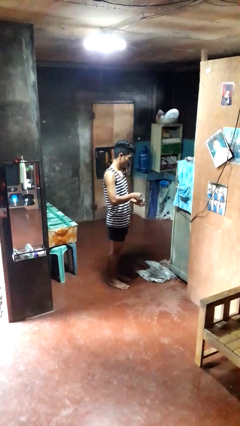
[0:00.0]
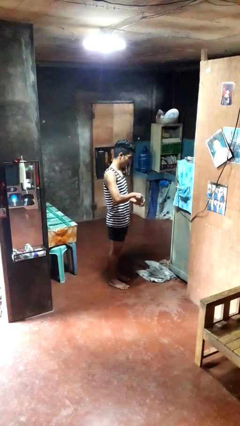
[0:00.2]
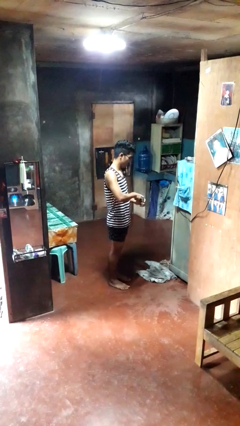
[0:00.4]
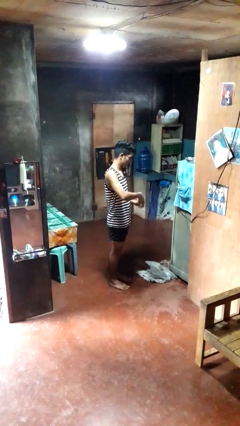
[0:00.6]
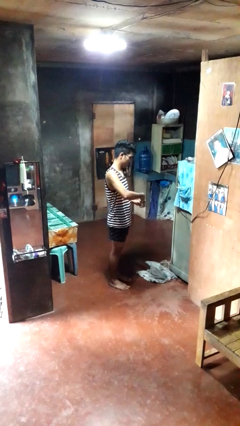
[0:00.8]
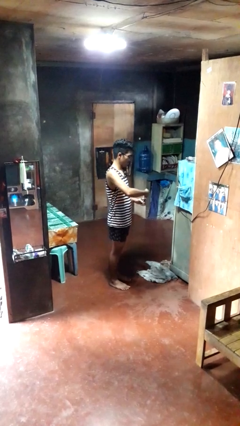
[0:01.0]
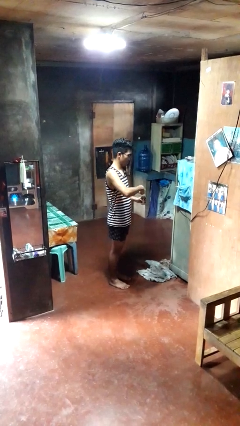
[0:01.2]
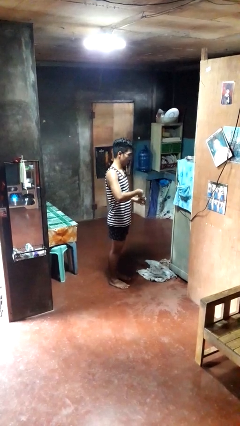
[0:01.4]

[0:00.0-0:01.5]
person opens beverage can

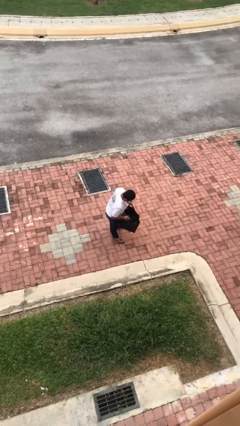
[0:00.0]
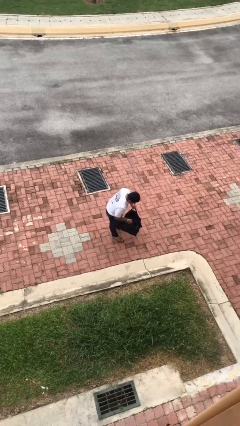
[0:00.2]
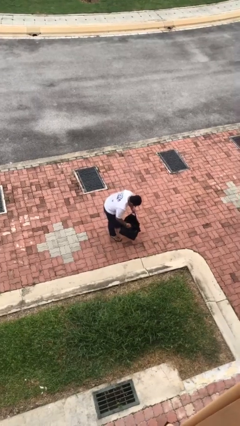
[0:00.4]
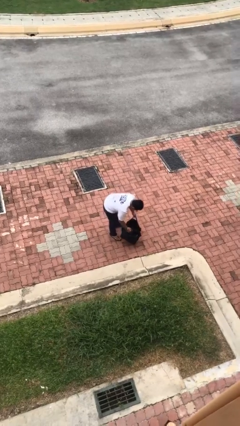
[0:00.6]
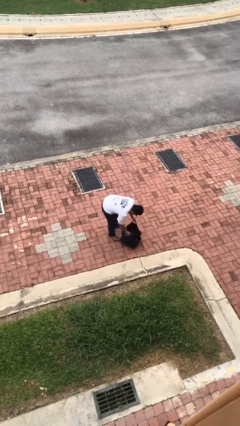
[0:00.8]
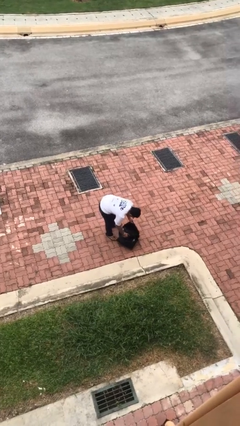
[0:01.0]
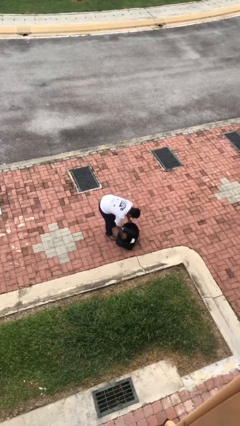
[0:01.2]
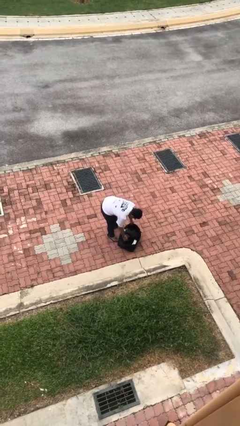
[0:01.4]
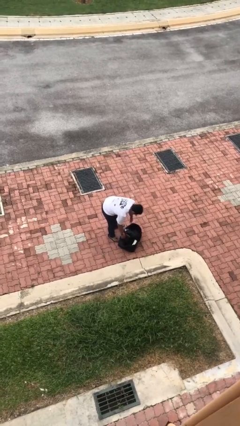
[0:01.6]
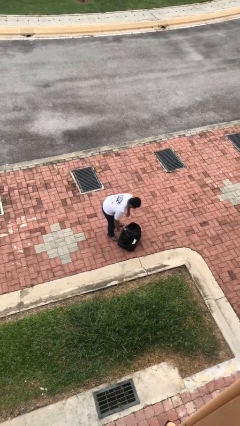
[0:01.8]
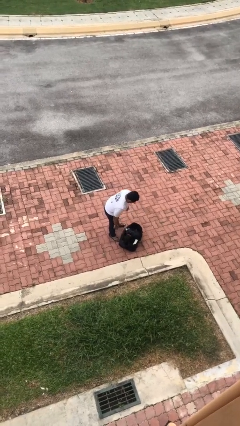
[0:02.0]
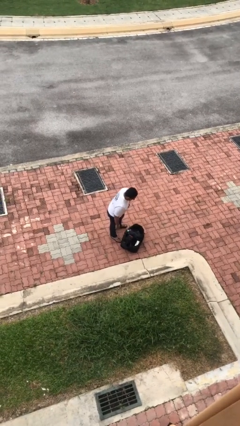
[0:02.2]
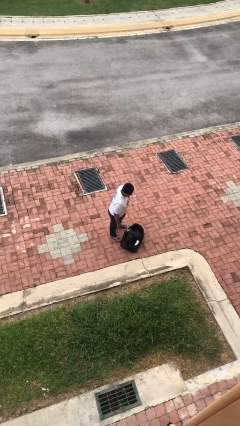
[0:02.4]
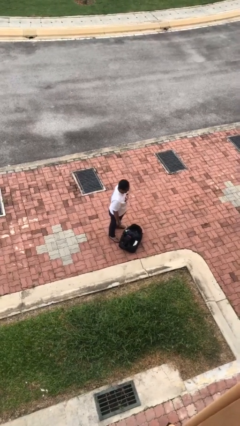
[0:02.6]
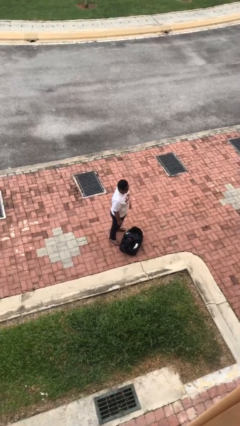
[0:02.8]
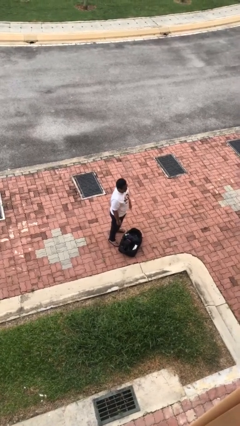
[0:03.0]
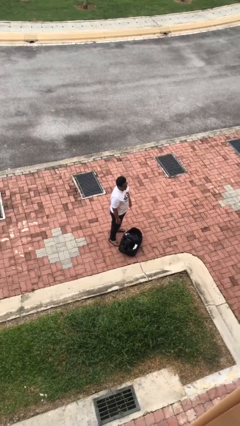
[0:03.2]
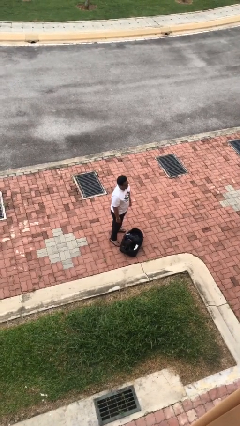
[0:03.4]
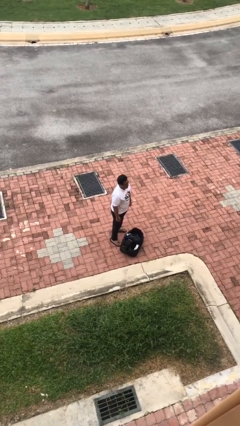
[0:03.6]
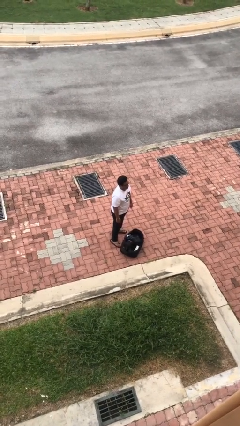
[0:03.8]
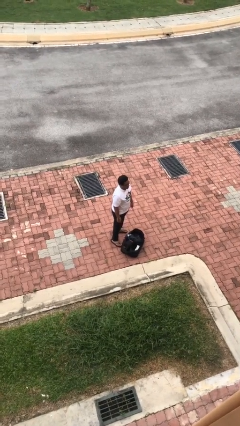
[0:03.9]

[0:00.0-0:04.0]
person puts down object on floor

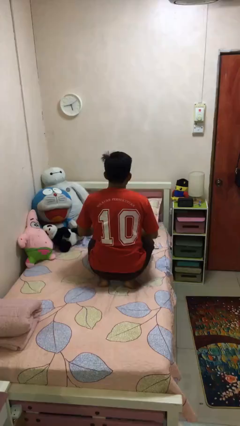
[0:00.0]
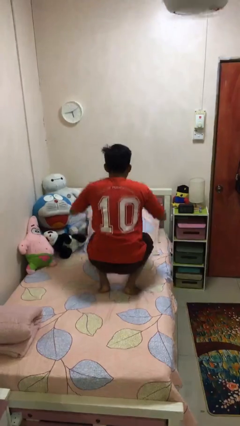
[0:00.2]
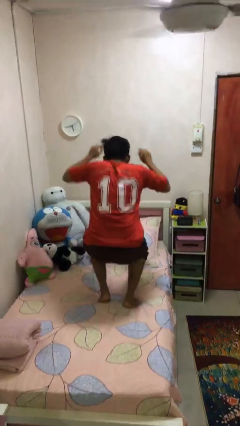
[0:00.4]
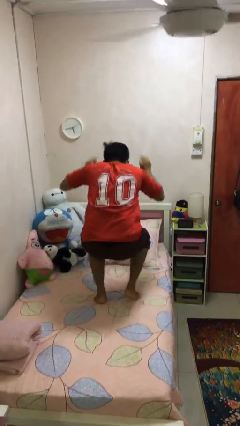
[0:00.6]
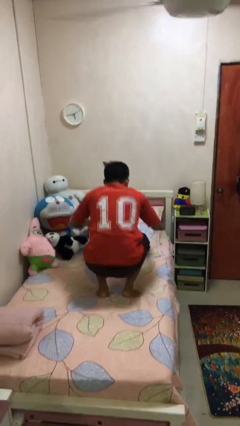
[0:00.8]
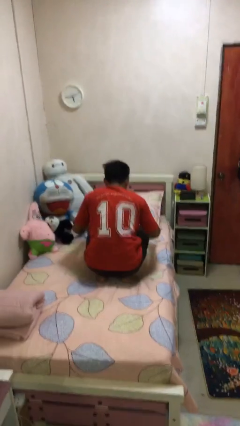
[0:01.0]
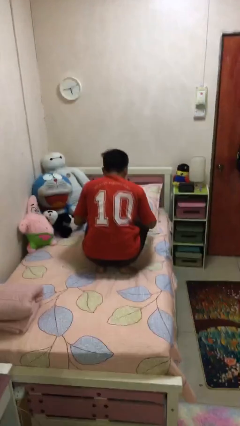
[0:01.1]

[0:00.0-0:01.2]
person jumps on bed

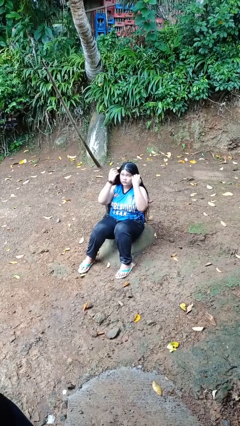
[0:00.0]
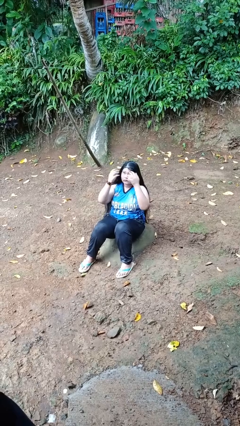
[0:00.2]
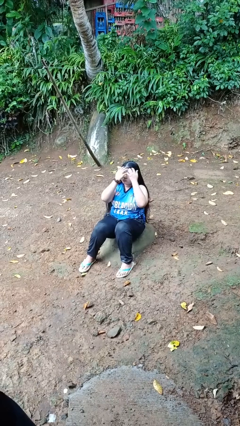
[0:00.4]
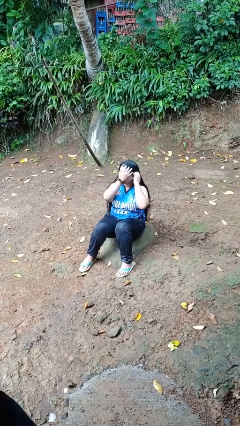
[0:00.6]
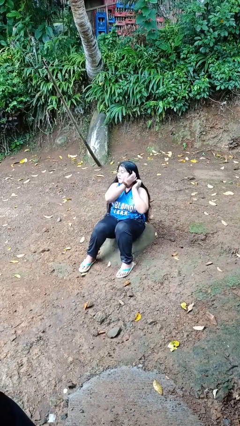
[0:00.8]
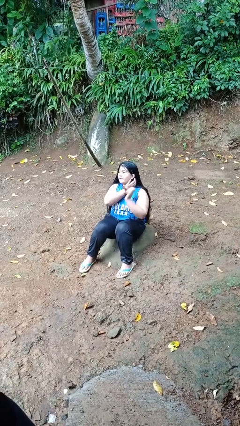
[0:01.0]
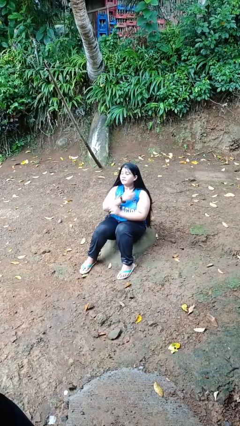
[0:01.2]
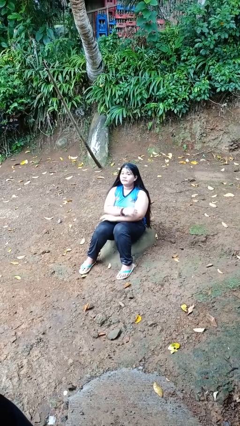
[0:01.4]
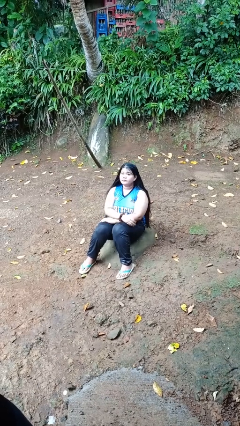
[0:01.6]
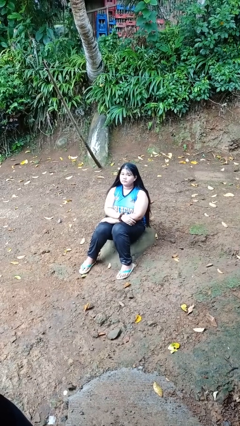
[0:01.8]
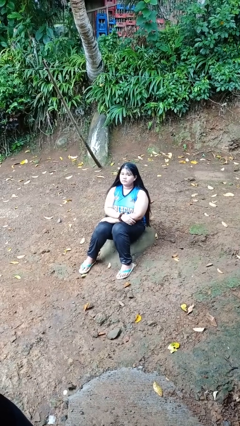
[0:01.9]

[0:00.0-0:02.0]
person strokes hair

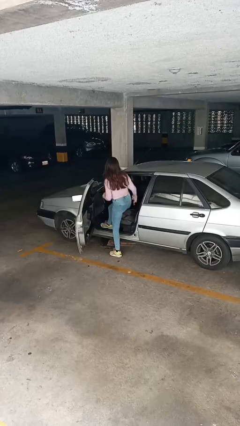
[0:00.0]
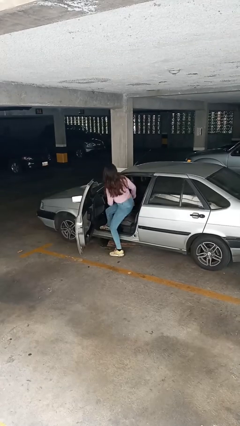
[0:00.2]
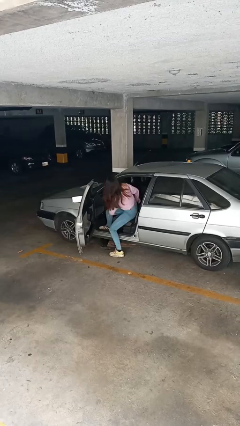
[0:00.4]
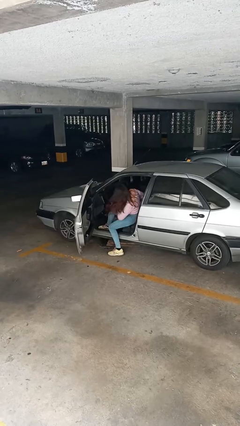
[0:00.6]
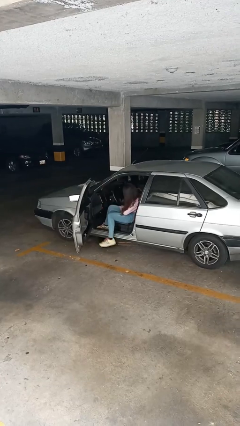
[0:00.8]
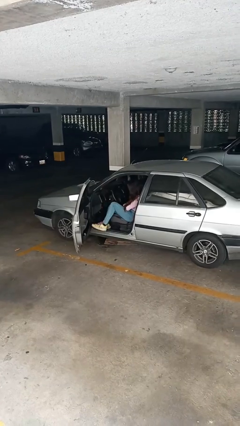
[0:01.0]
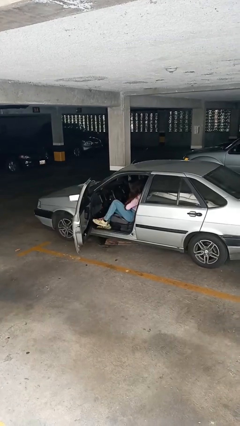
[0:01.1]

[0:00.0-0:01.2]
person enters car

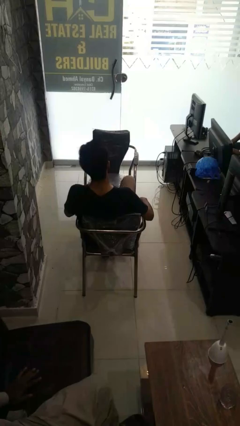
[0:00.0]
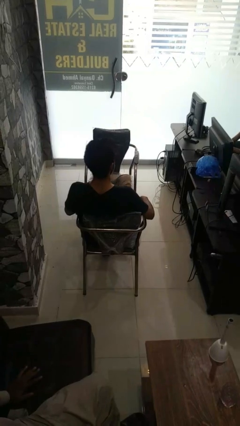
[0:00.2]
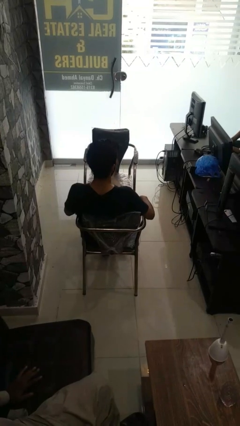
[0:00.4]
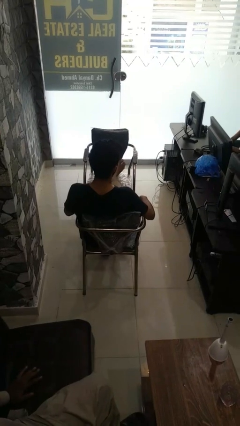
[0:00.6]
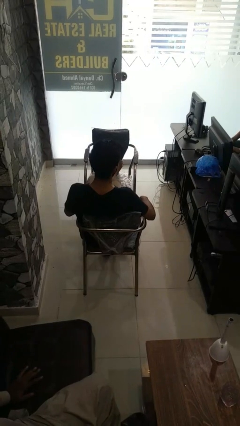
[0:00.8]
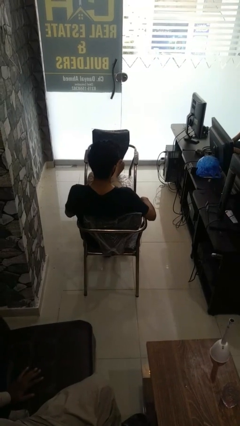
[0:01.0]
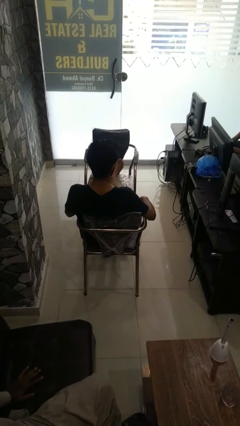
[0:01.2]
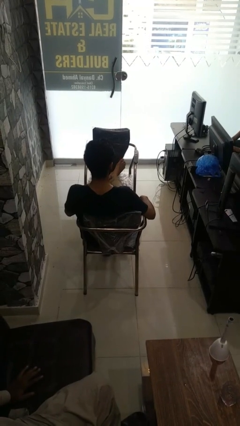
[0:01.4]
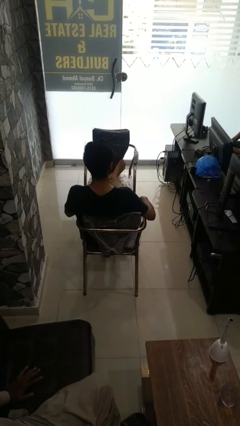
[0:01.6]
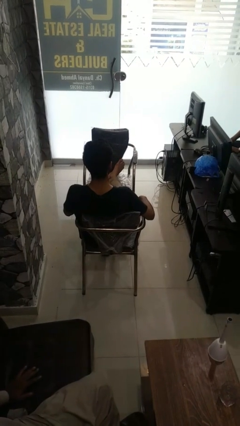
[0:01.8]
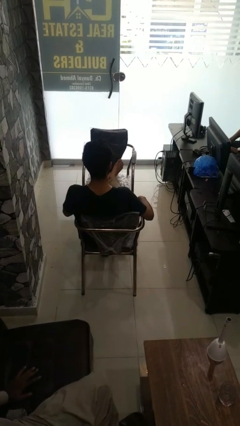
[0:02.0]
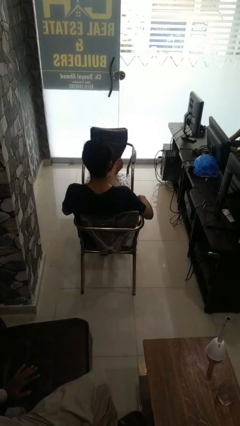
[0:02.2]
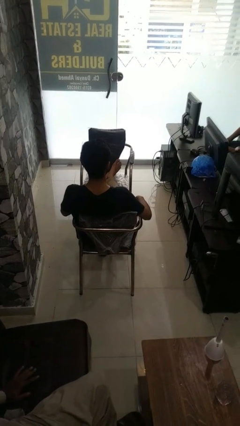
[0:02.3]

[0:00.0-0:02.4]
person puts feet up

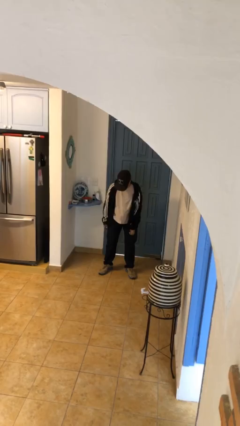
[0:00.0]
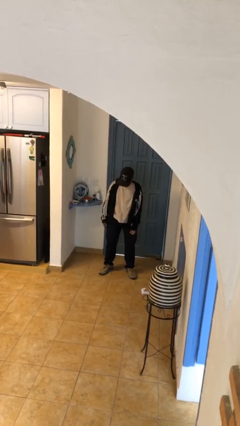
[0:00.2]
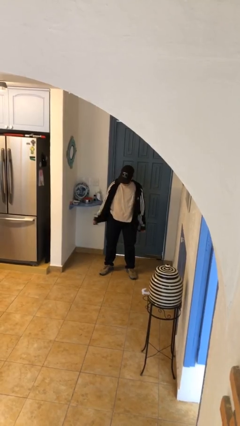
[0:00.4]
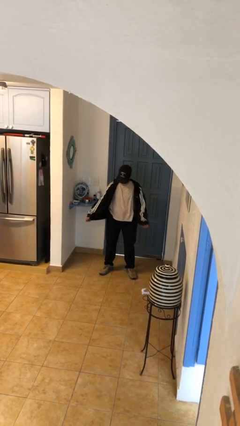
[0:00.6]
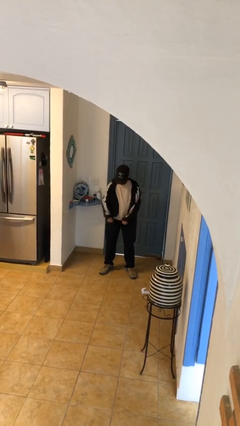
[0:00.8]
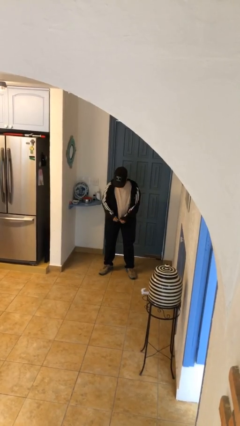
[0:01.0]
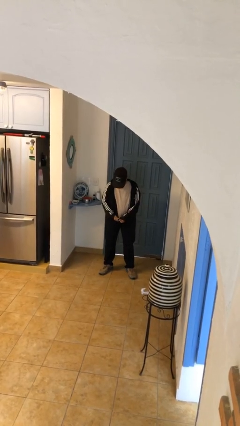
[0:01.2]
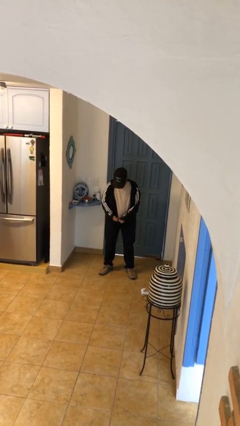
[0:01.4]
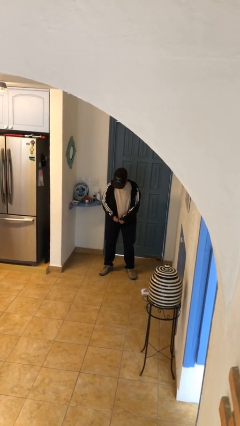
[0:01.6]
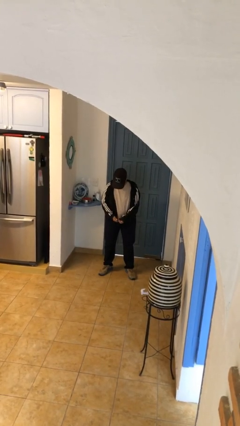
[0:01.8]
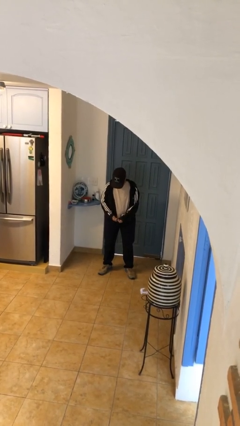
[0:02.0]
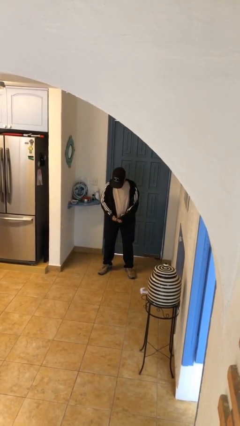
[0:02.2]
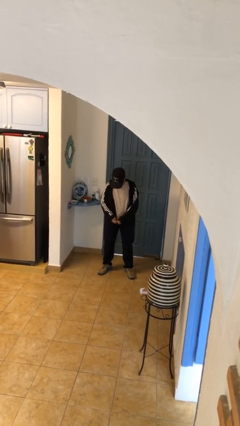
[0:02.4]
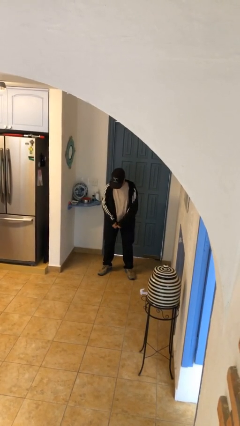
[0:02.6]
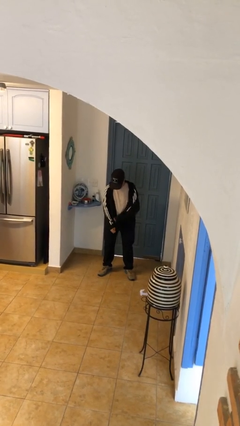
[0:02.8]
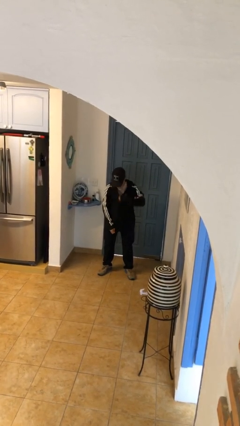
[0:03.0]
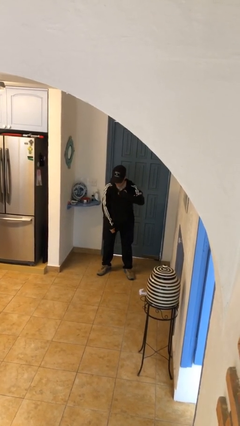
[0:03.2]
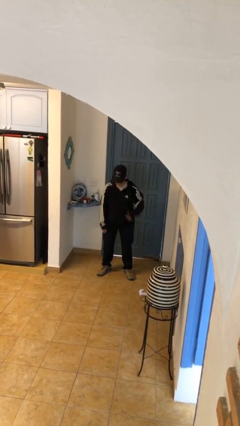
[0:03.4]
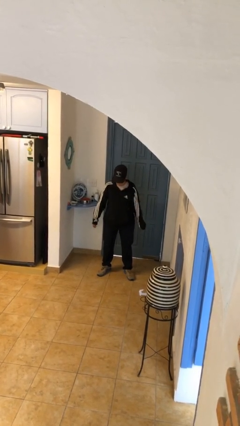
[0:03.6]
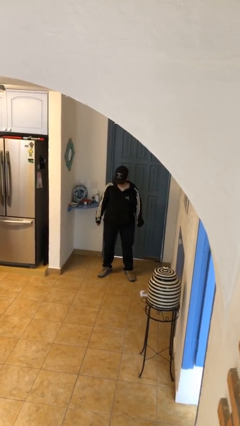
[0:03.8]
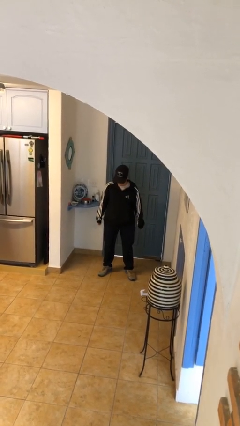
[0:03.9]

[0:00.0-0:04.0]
person zips up jacket

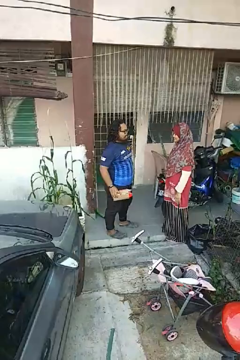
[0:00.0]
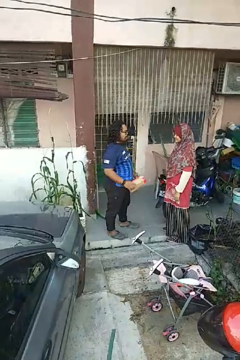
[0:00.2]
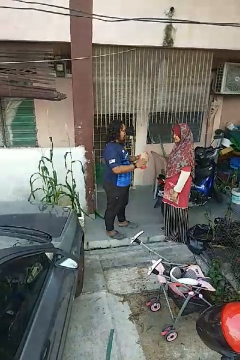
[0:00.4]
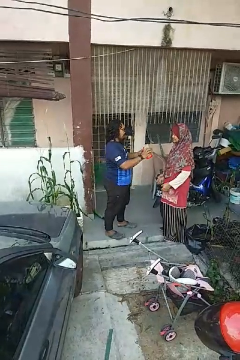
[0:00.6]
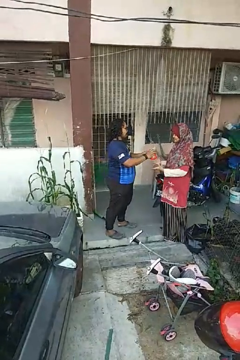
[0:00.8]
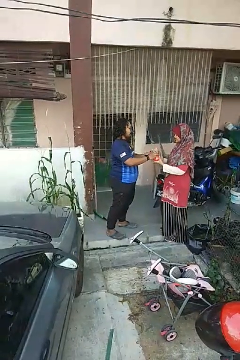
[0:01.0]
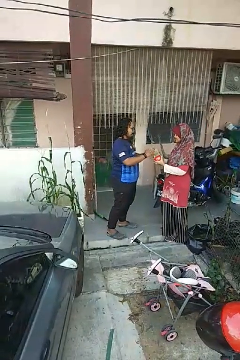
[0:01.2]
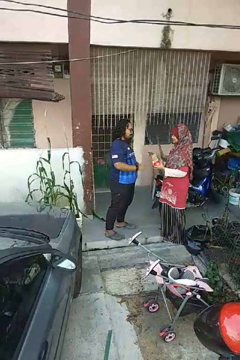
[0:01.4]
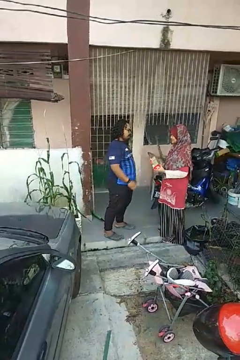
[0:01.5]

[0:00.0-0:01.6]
person transfers object to person
